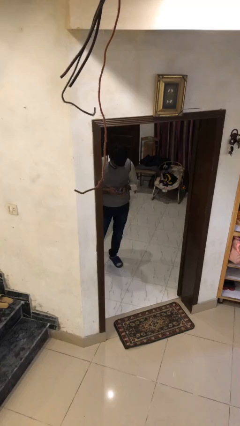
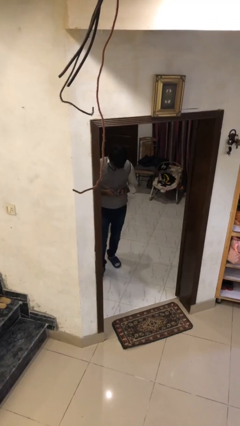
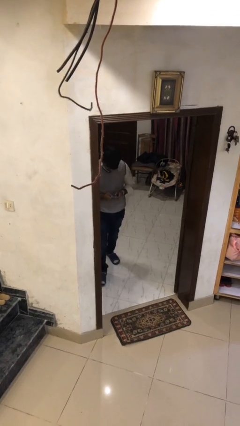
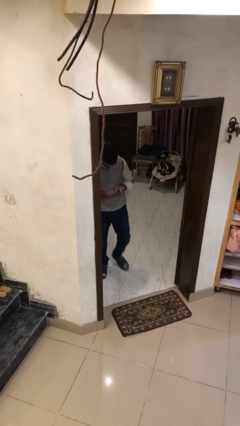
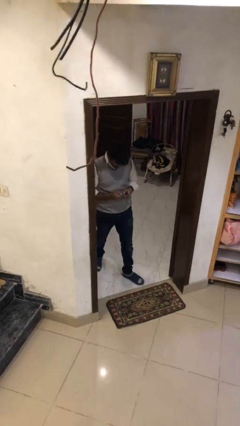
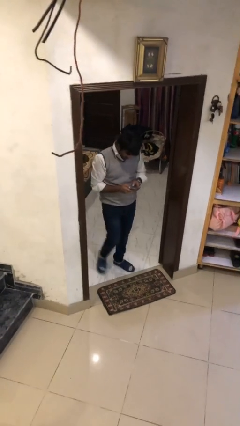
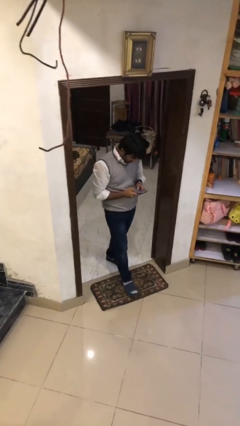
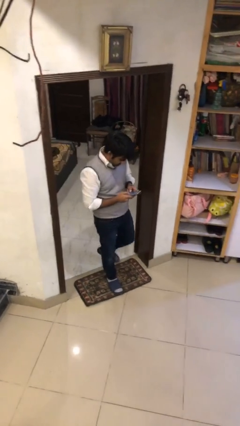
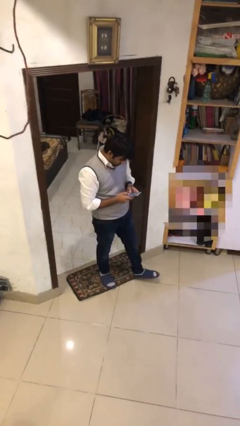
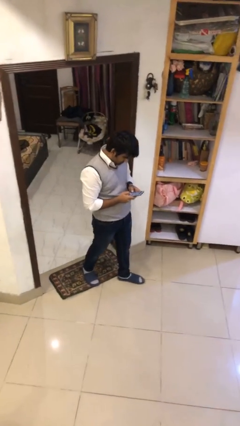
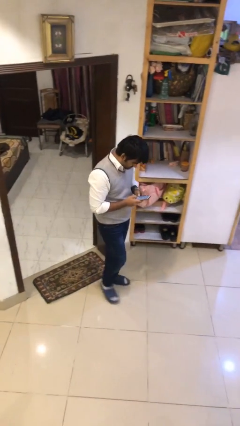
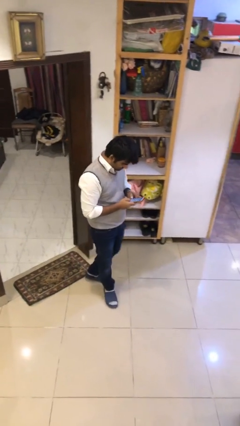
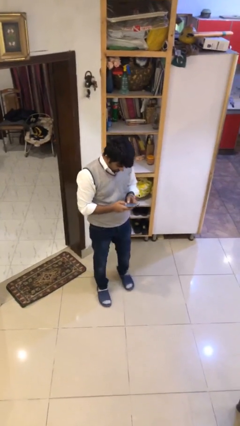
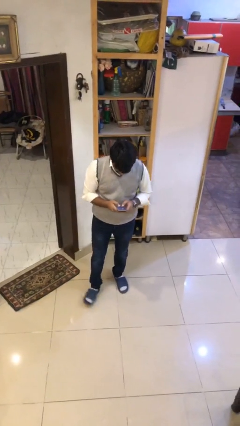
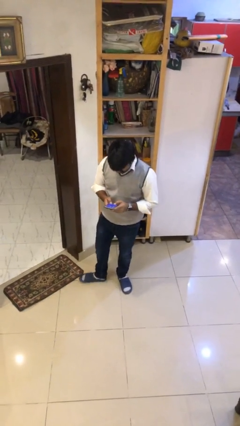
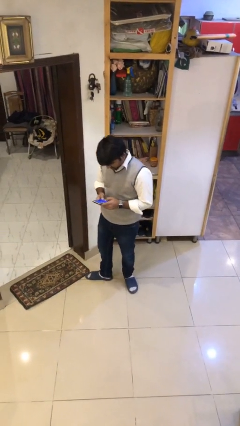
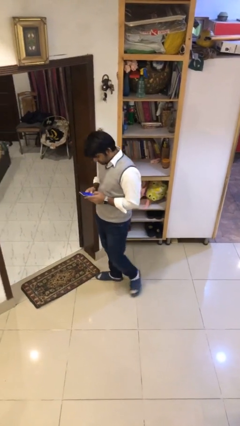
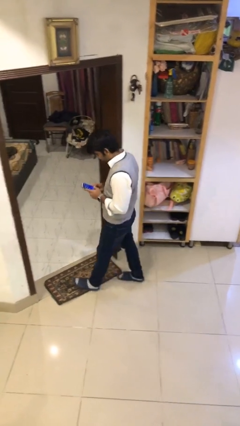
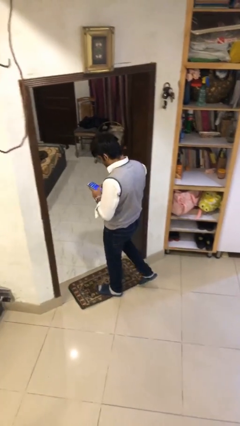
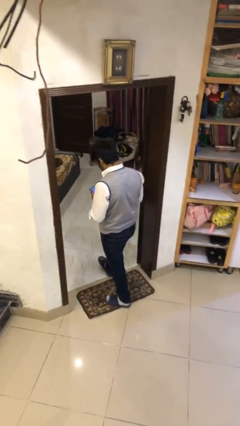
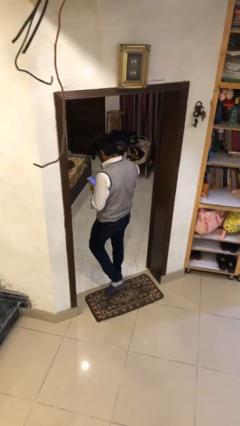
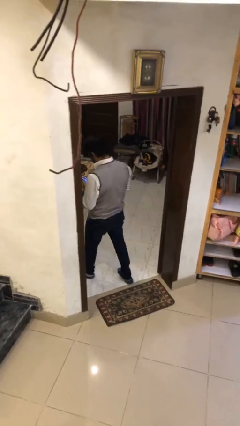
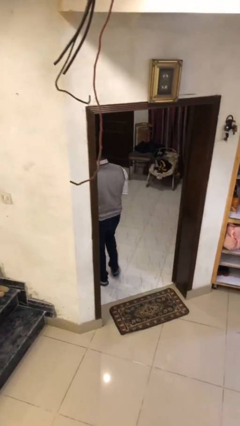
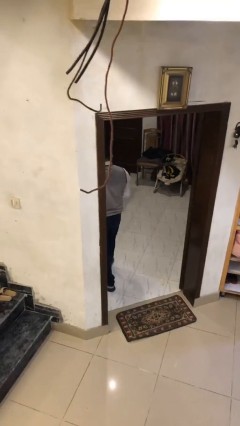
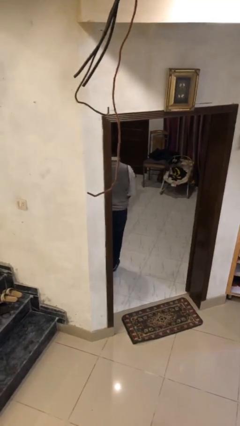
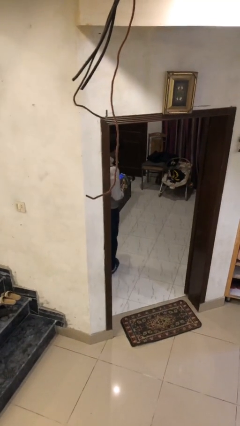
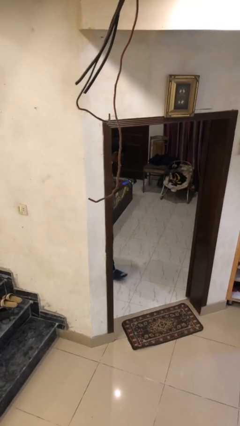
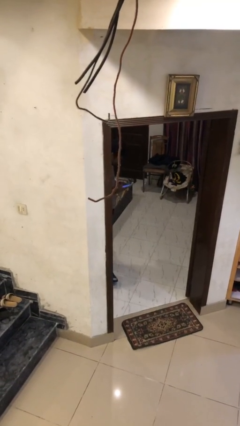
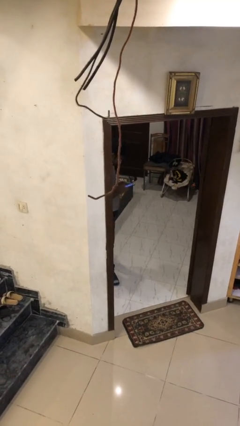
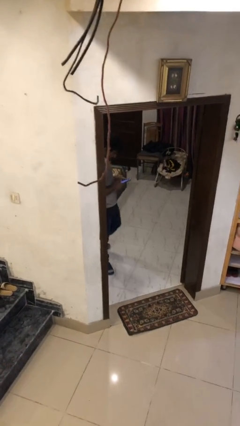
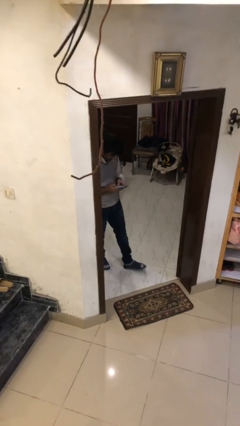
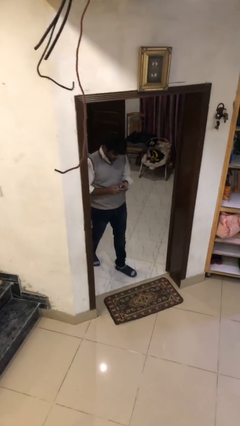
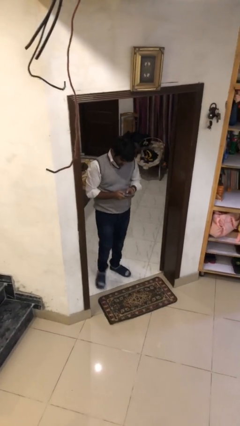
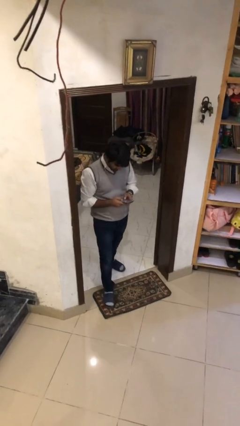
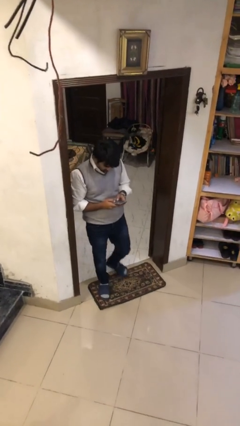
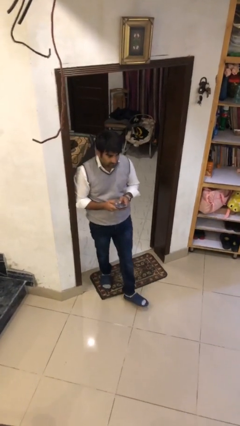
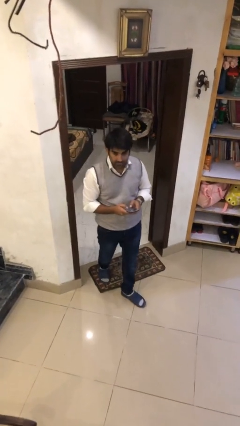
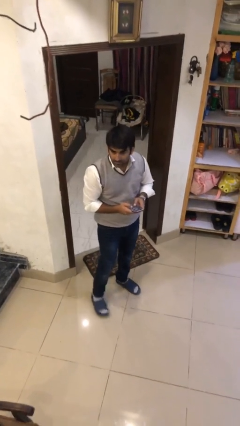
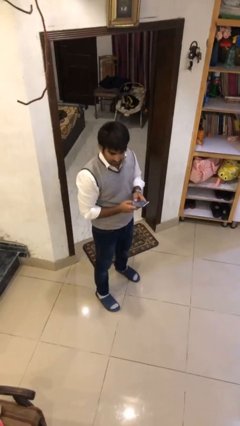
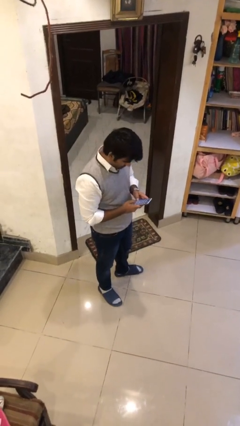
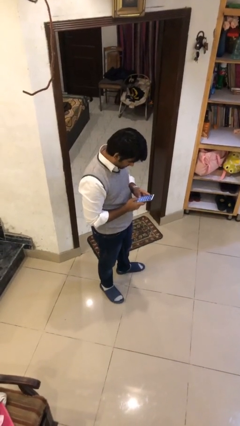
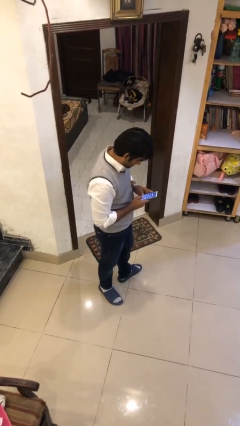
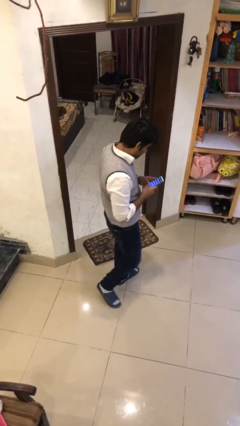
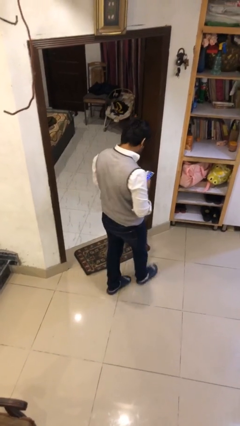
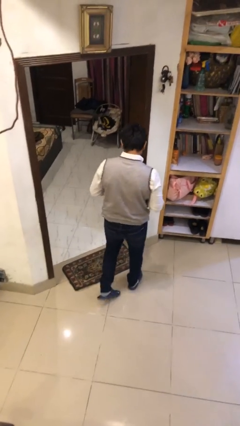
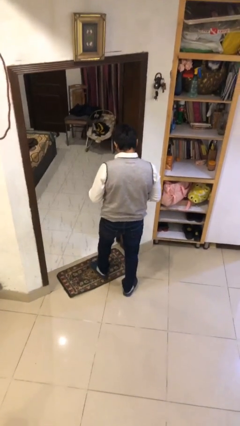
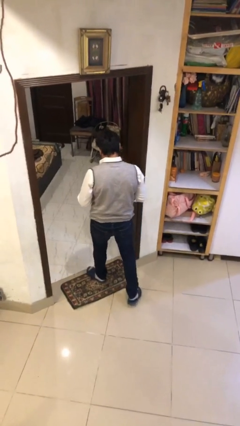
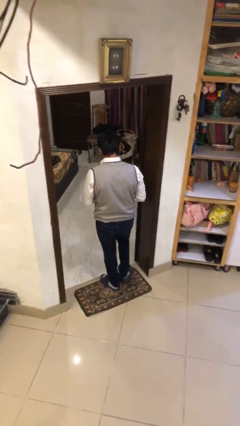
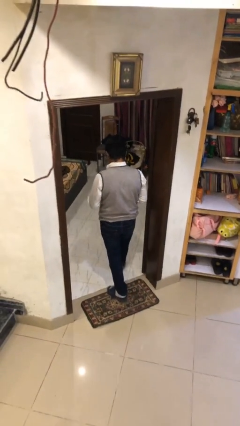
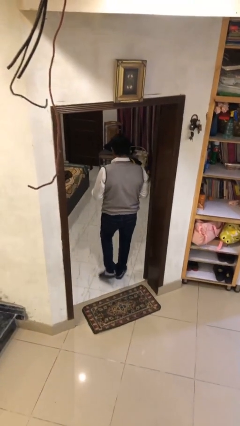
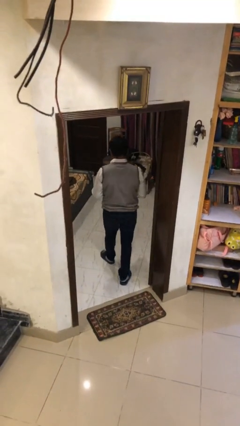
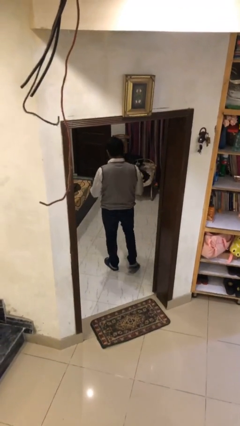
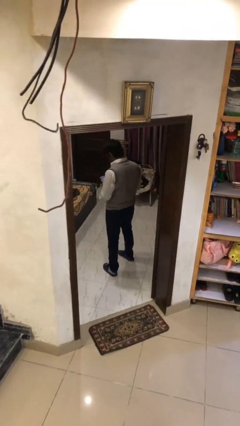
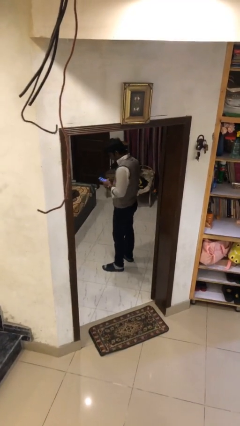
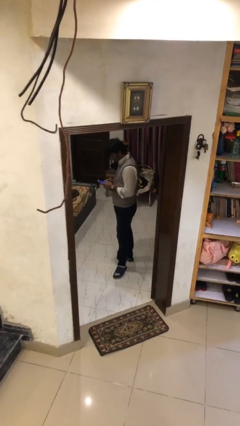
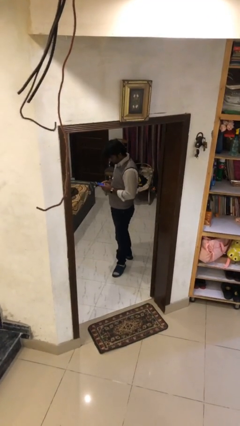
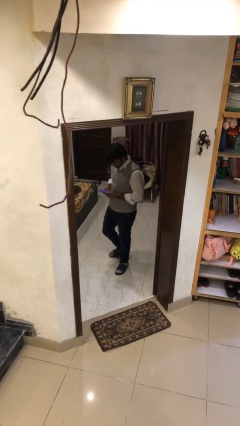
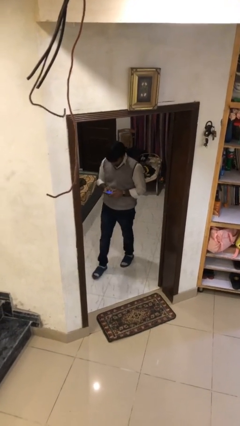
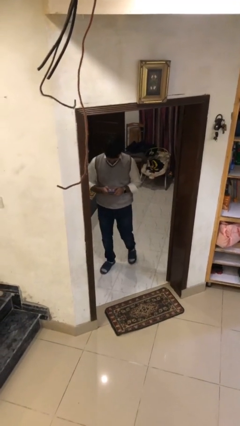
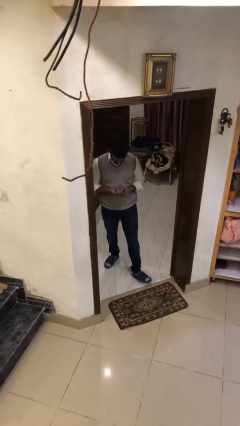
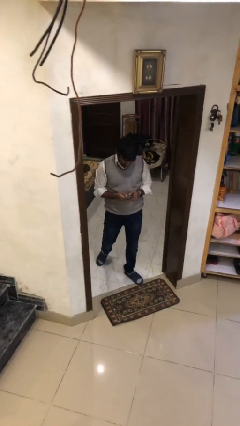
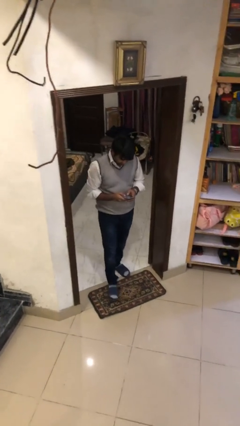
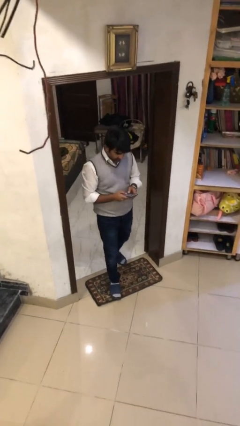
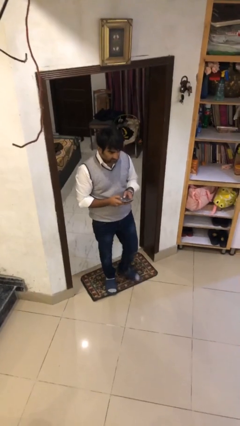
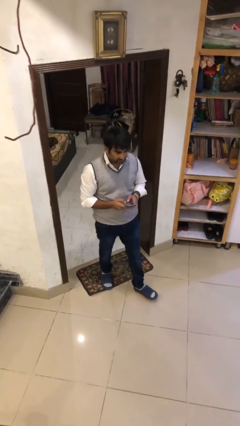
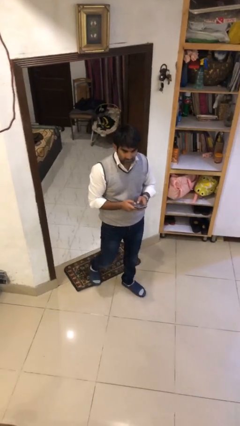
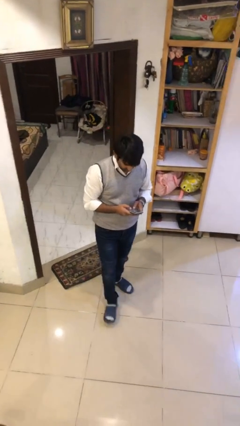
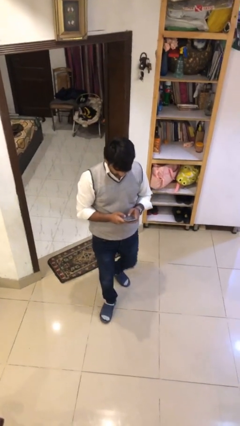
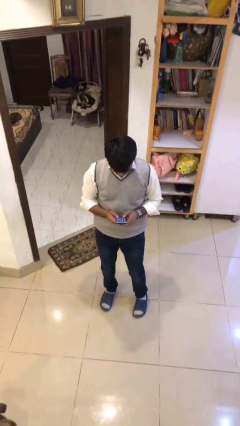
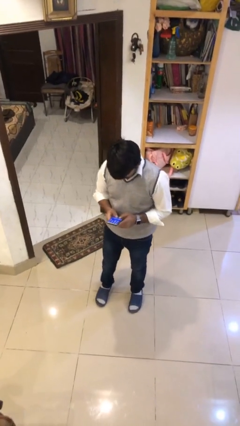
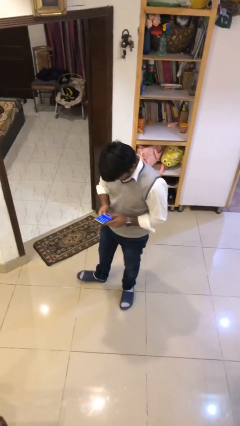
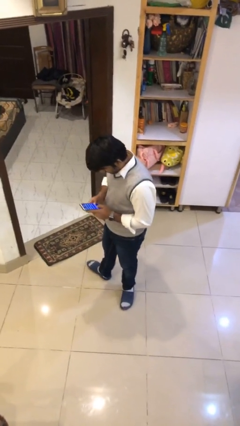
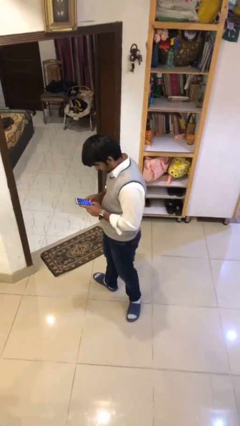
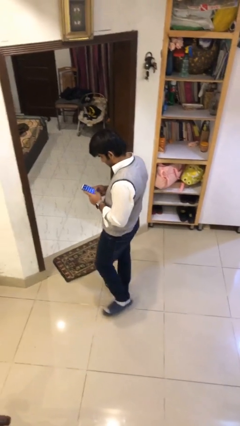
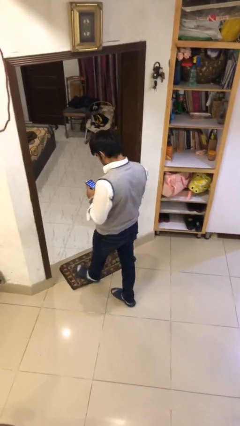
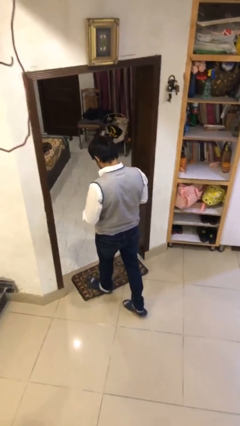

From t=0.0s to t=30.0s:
person texts on phone

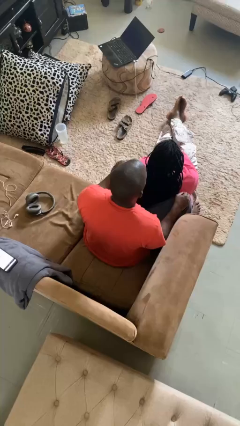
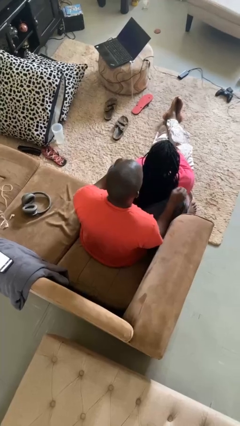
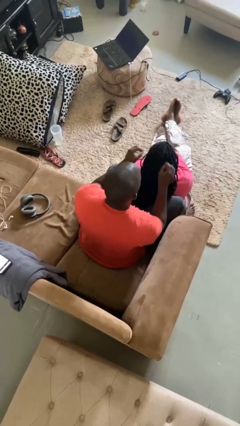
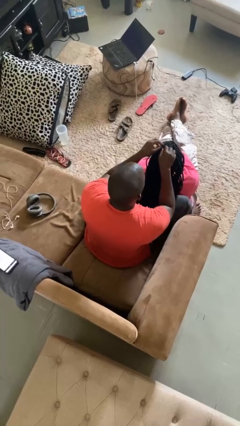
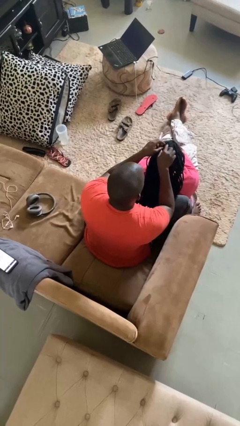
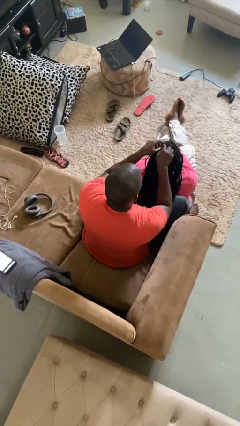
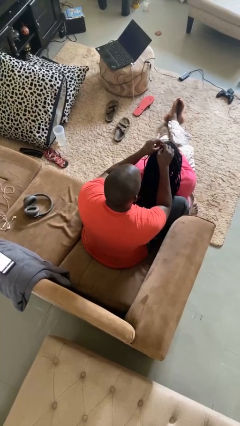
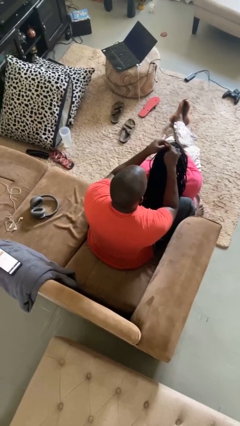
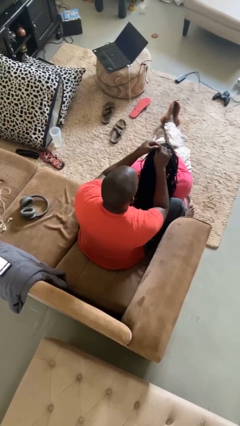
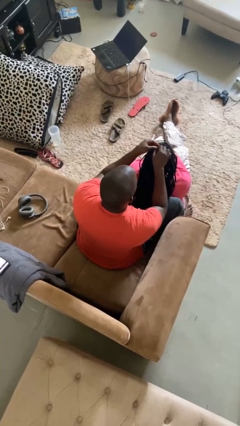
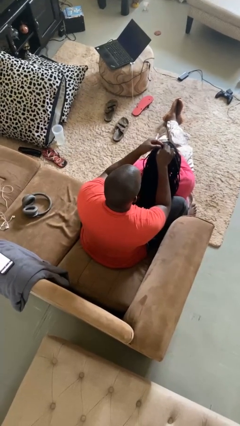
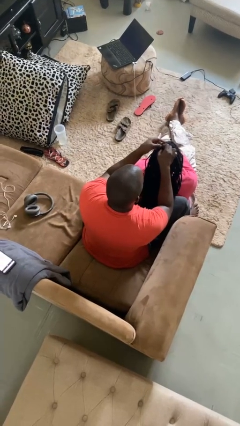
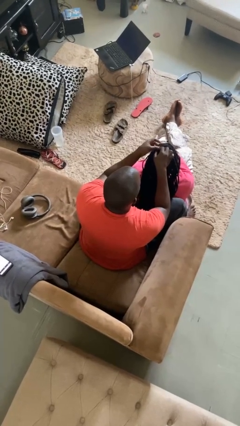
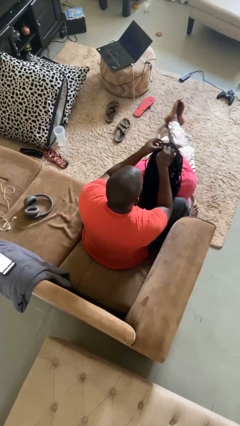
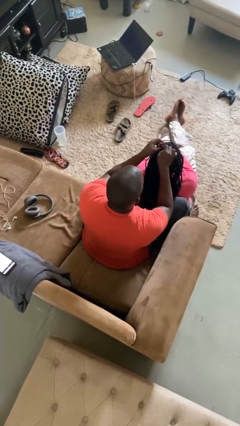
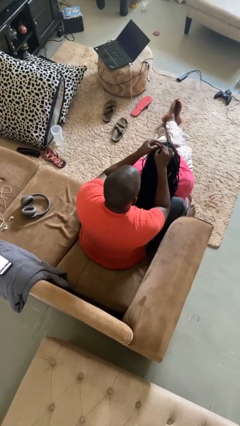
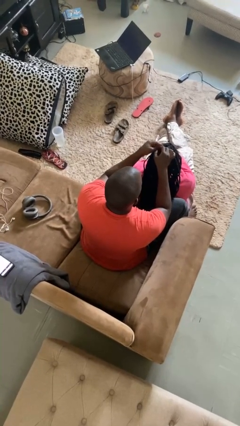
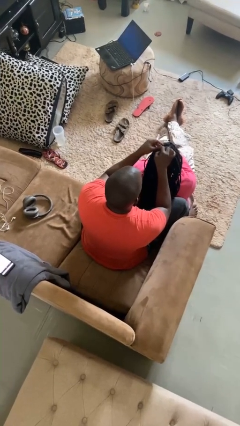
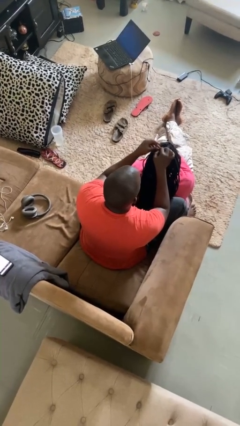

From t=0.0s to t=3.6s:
person braids hair of person
